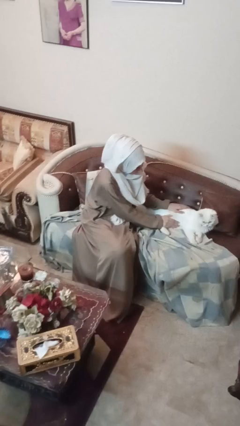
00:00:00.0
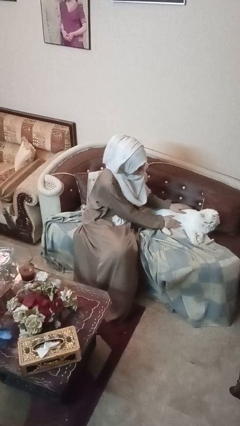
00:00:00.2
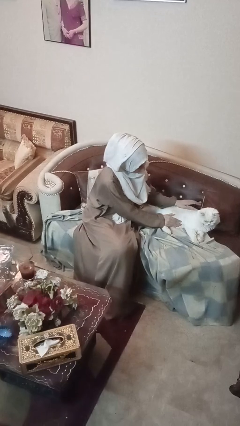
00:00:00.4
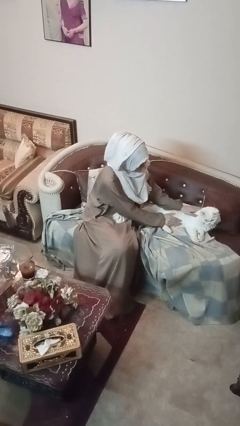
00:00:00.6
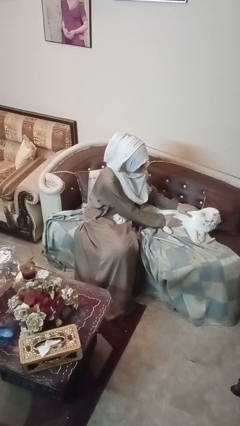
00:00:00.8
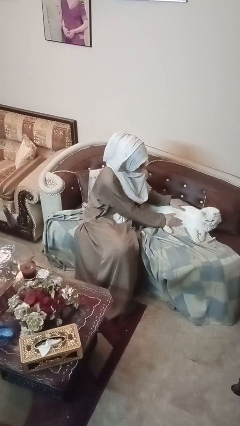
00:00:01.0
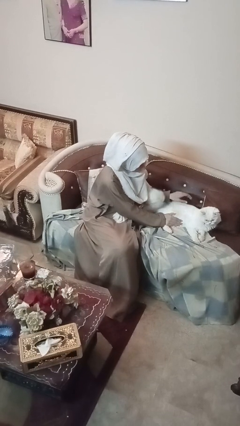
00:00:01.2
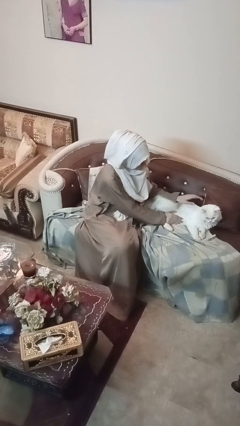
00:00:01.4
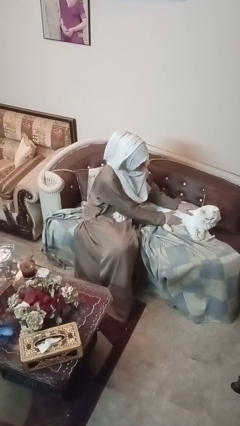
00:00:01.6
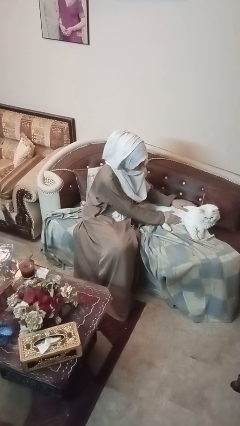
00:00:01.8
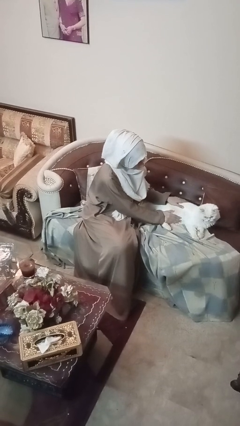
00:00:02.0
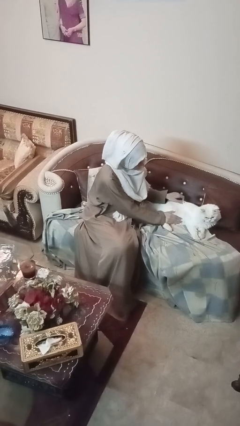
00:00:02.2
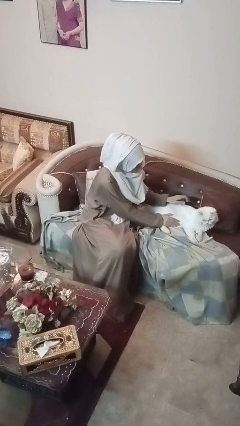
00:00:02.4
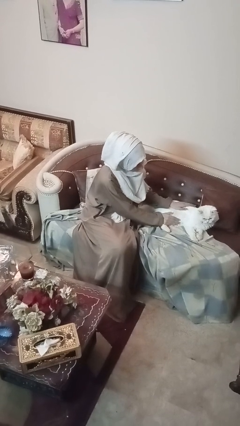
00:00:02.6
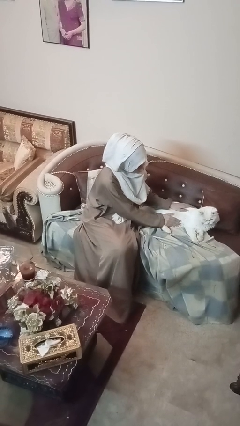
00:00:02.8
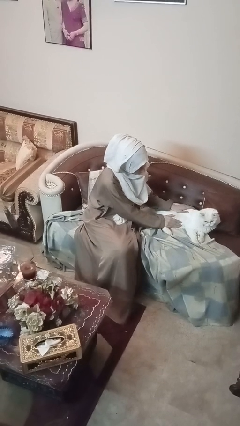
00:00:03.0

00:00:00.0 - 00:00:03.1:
person pets cat

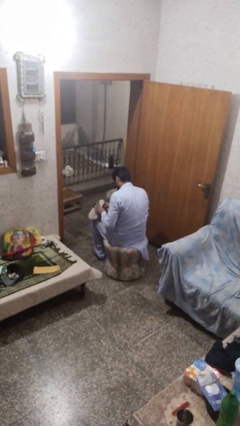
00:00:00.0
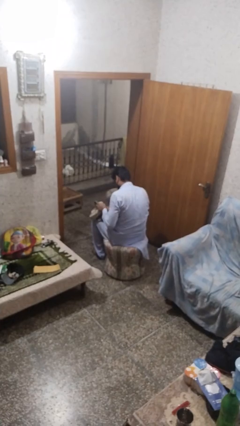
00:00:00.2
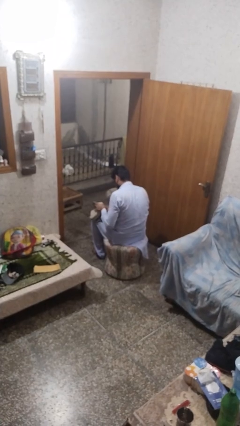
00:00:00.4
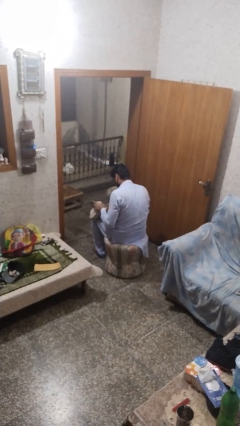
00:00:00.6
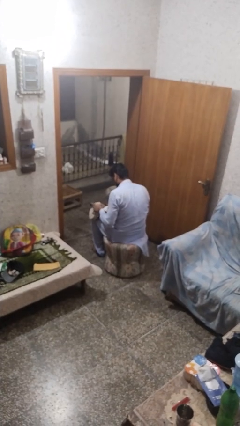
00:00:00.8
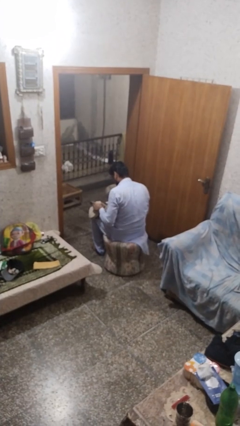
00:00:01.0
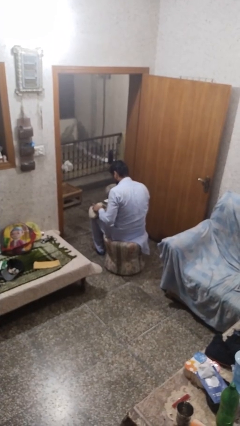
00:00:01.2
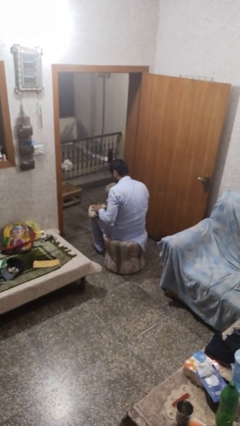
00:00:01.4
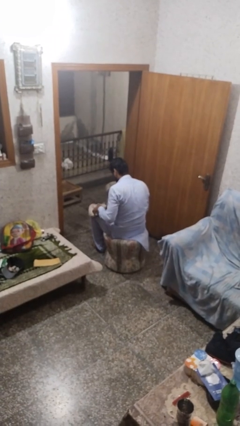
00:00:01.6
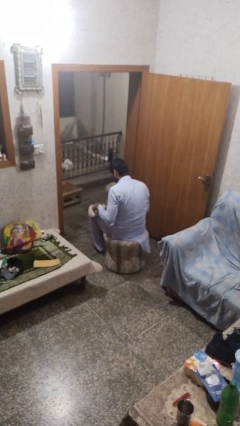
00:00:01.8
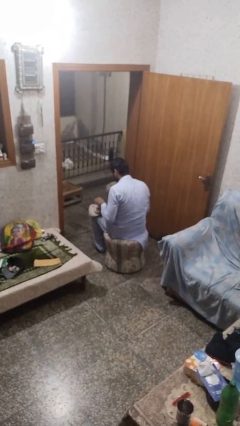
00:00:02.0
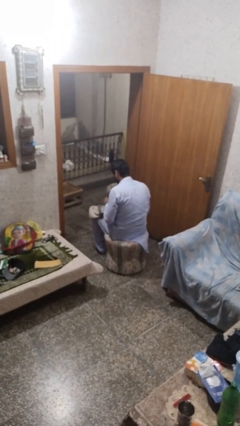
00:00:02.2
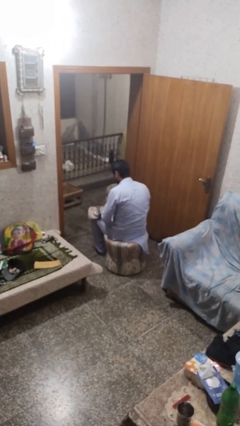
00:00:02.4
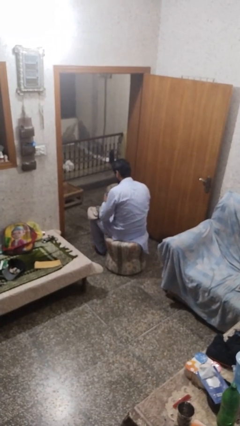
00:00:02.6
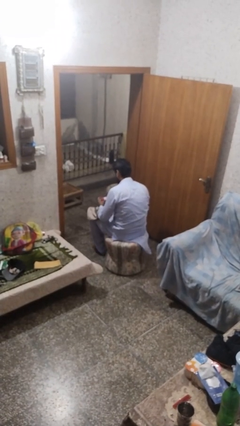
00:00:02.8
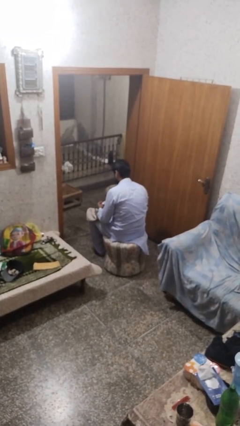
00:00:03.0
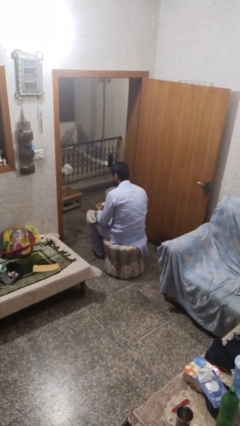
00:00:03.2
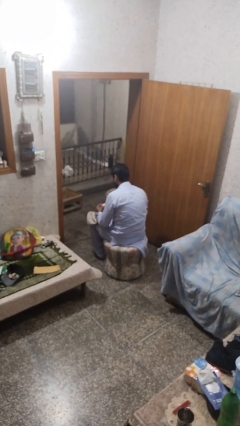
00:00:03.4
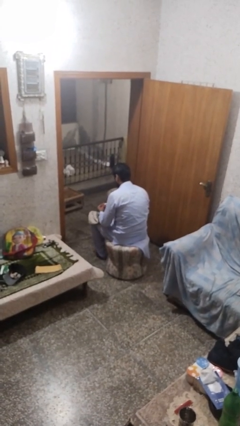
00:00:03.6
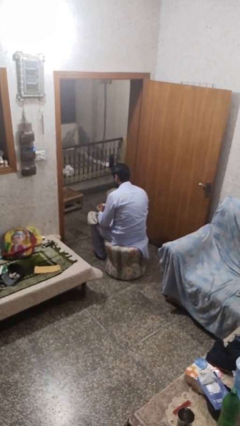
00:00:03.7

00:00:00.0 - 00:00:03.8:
person takes object from purse

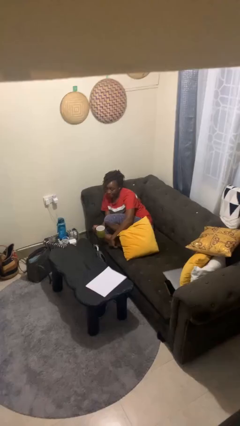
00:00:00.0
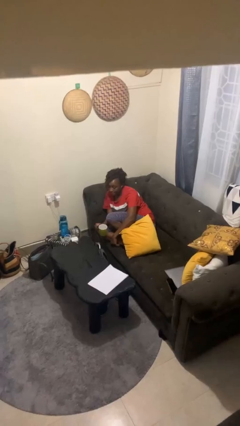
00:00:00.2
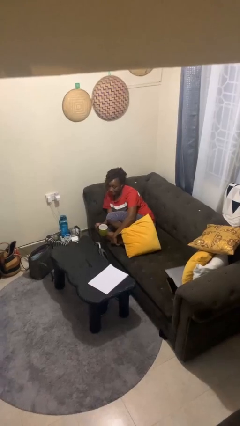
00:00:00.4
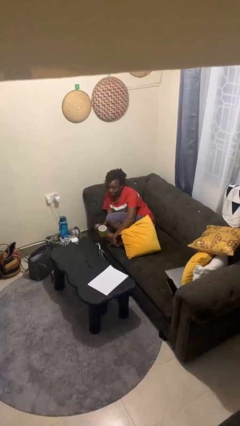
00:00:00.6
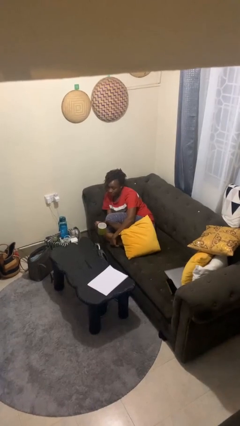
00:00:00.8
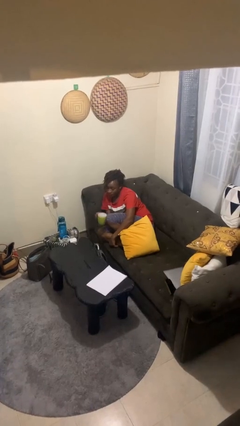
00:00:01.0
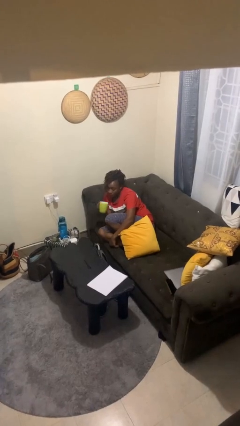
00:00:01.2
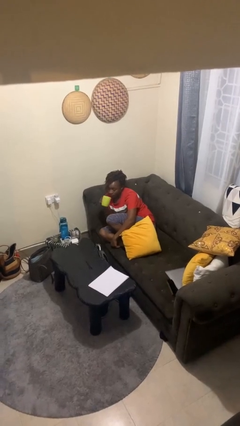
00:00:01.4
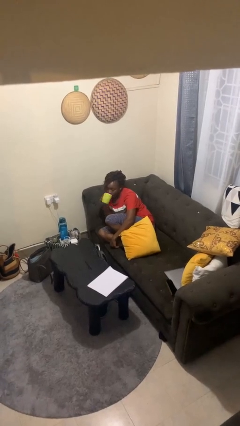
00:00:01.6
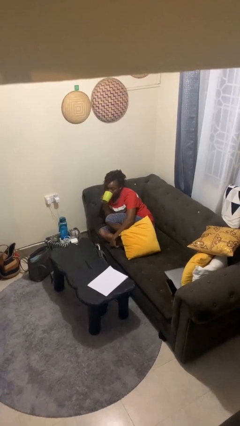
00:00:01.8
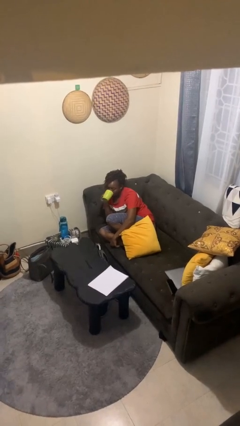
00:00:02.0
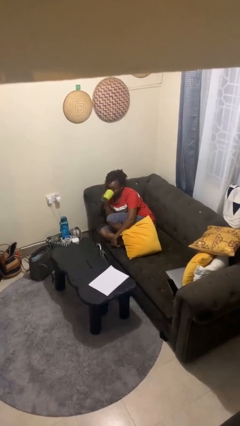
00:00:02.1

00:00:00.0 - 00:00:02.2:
person drinks from mug

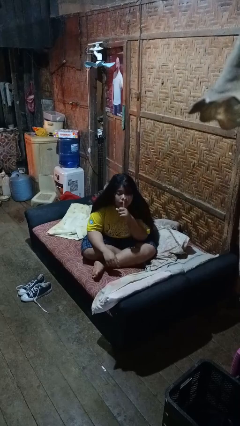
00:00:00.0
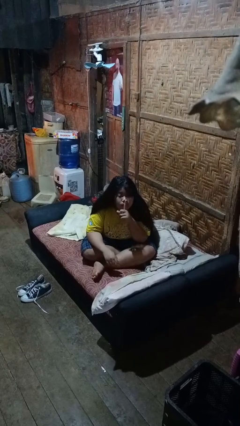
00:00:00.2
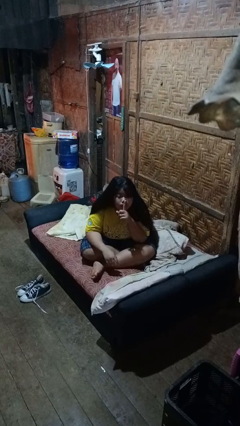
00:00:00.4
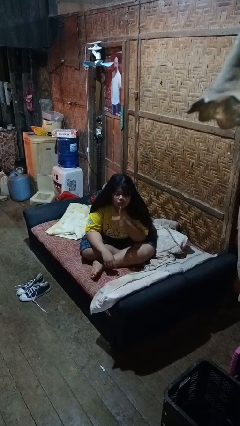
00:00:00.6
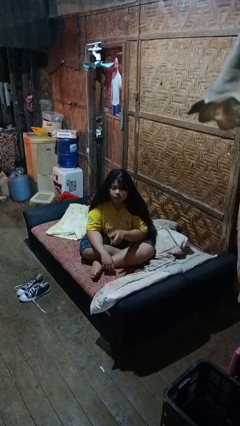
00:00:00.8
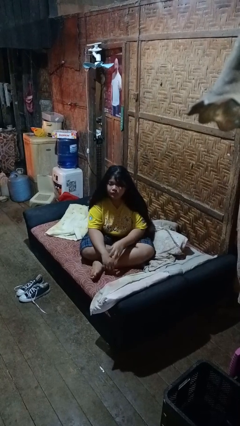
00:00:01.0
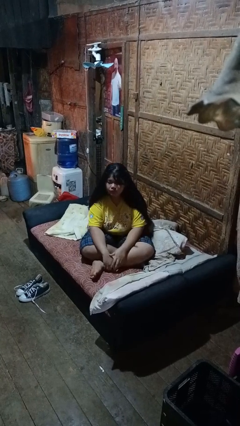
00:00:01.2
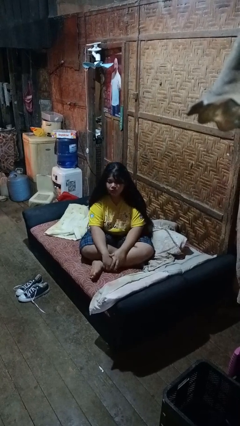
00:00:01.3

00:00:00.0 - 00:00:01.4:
person gestures be quiet

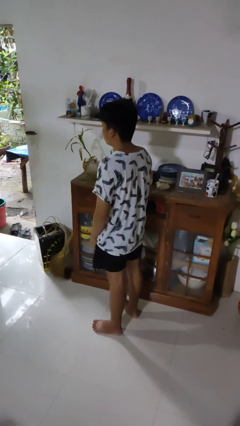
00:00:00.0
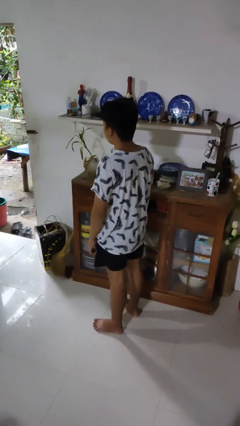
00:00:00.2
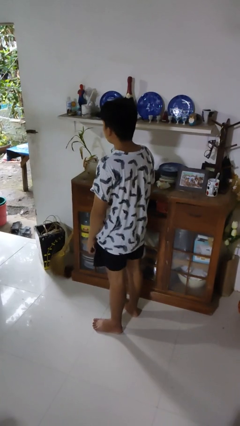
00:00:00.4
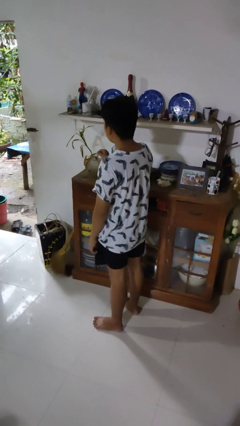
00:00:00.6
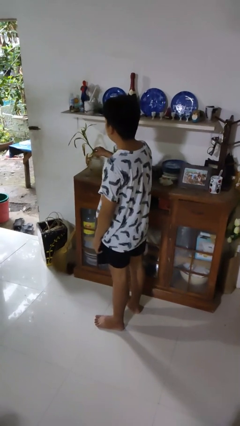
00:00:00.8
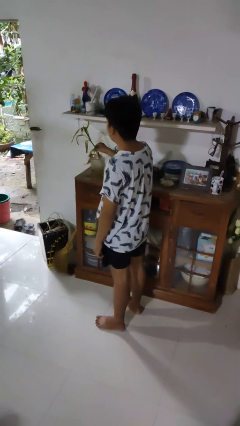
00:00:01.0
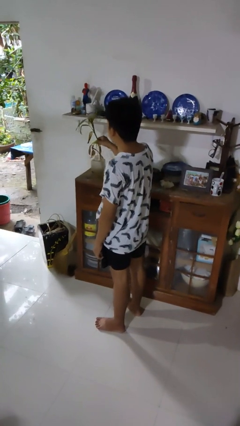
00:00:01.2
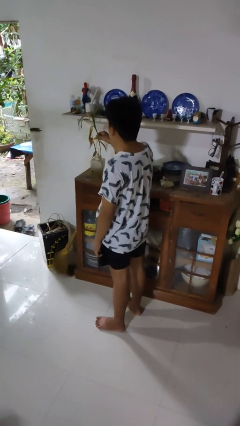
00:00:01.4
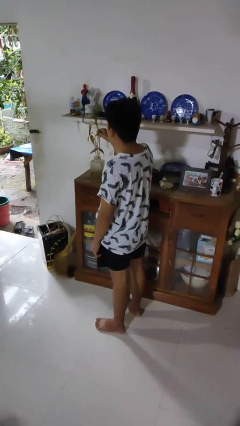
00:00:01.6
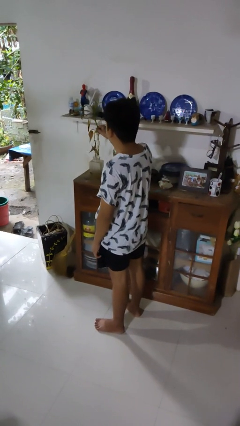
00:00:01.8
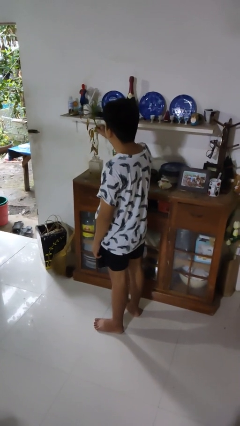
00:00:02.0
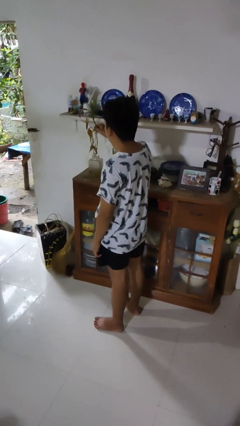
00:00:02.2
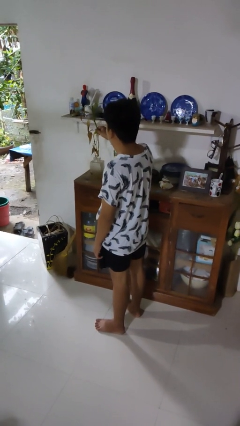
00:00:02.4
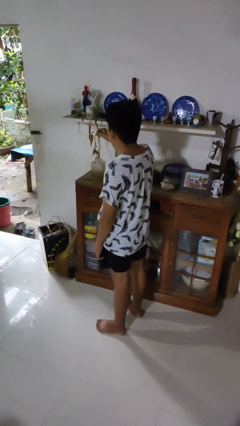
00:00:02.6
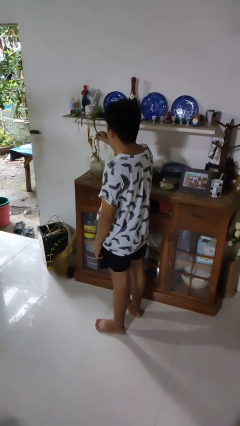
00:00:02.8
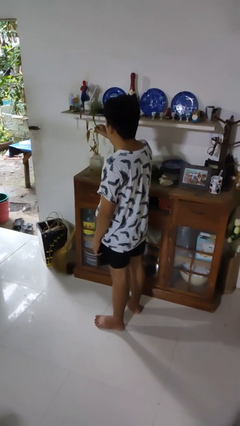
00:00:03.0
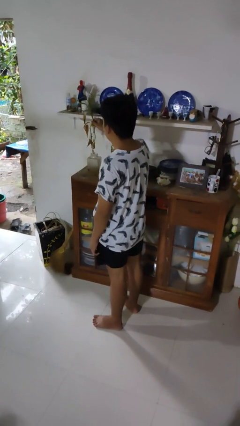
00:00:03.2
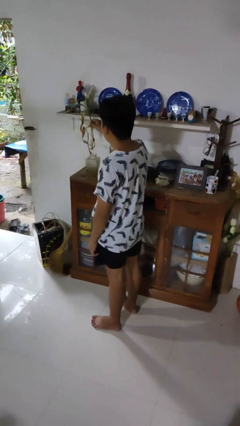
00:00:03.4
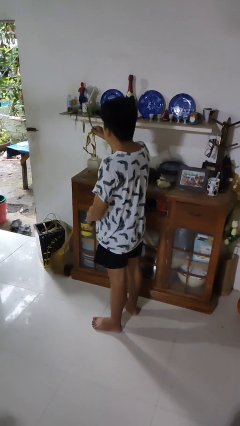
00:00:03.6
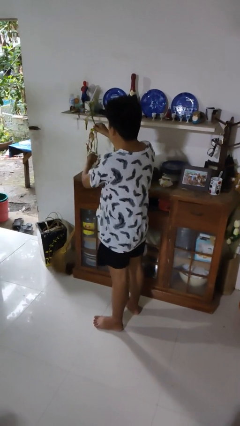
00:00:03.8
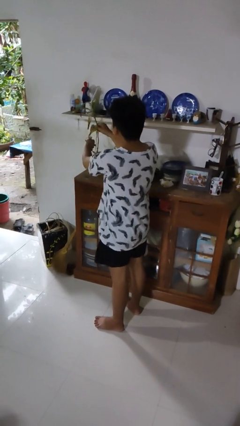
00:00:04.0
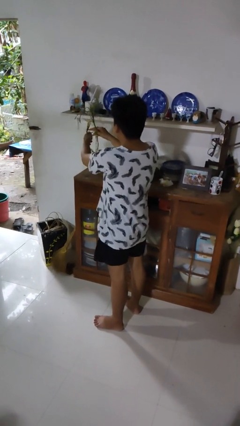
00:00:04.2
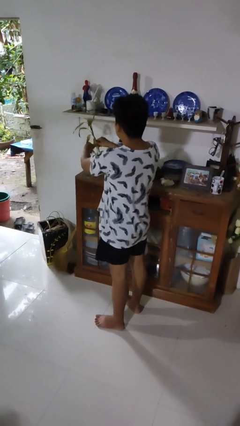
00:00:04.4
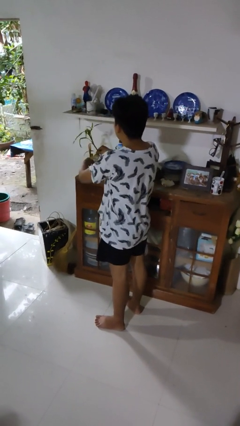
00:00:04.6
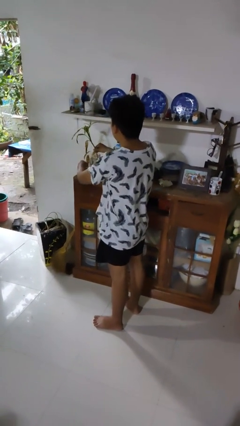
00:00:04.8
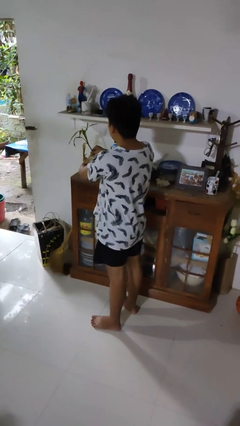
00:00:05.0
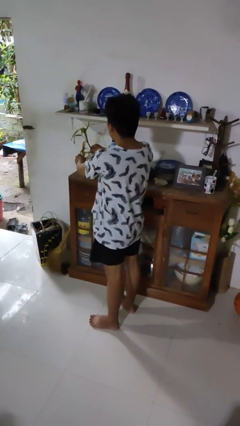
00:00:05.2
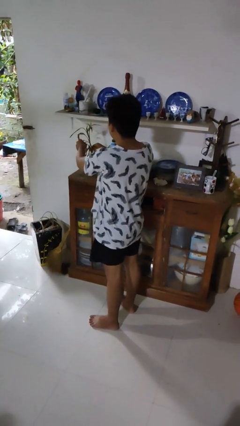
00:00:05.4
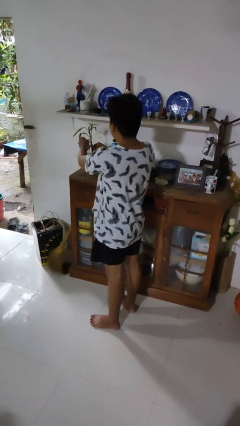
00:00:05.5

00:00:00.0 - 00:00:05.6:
person arranges flowers in vase

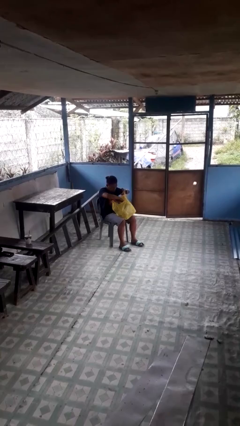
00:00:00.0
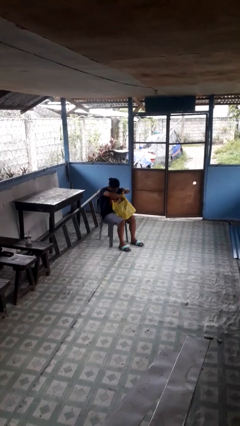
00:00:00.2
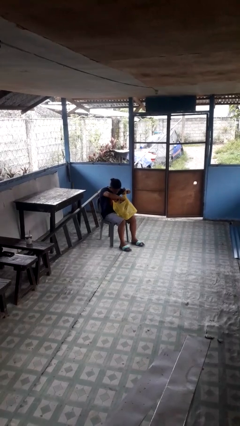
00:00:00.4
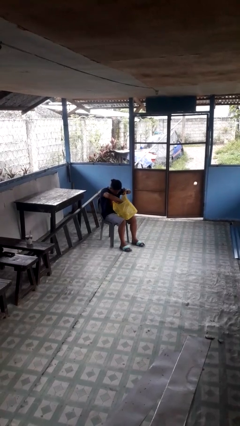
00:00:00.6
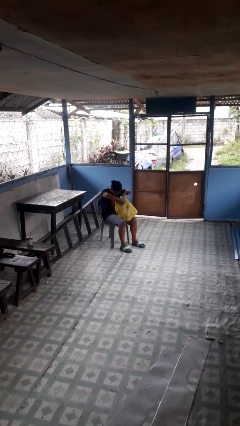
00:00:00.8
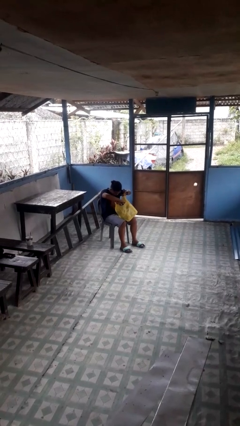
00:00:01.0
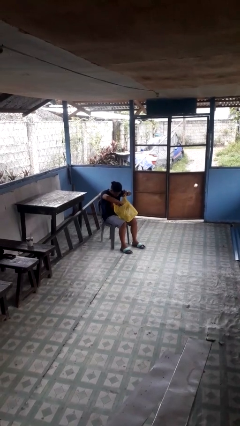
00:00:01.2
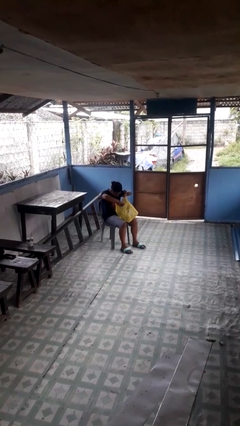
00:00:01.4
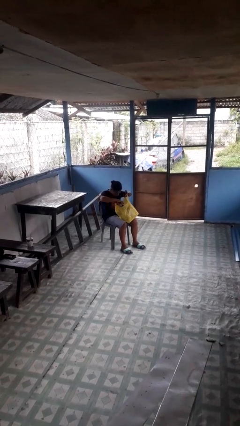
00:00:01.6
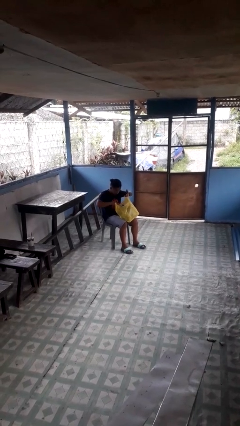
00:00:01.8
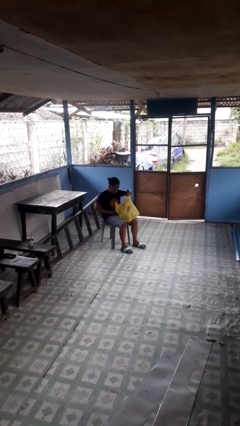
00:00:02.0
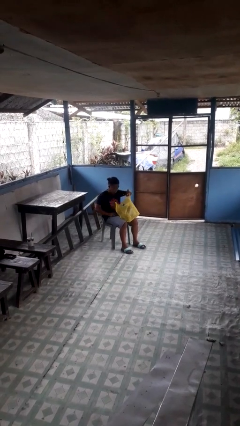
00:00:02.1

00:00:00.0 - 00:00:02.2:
person searches in bag
